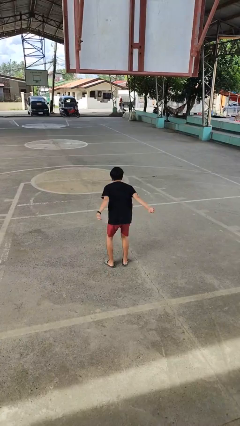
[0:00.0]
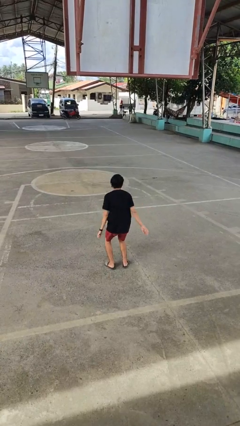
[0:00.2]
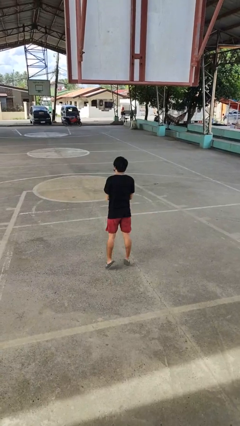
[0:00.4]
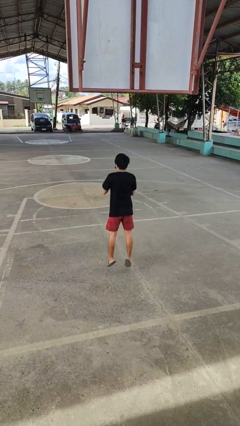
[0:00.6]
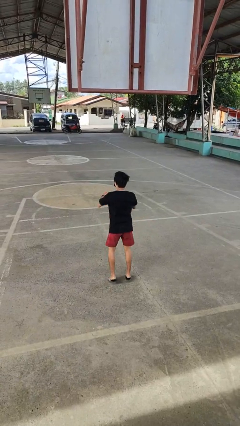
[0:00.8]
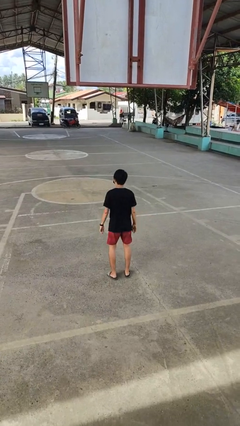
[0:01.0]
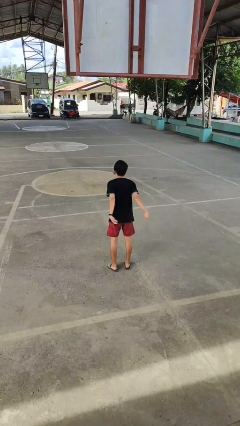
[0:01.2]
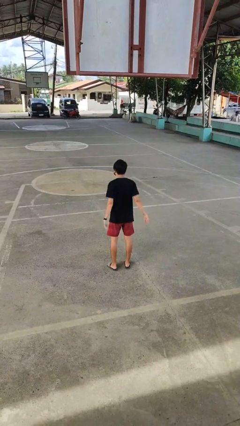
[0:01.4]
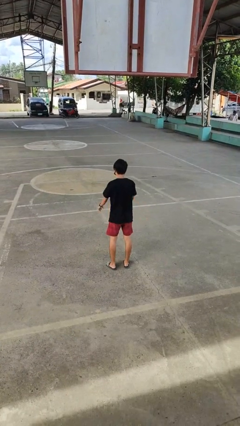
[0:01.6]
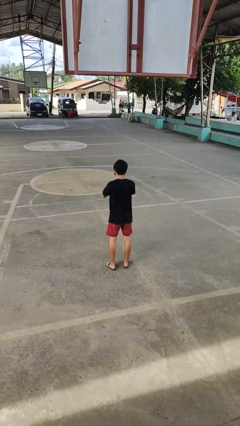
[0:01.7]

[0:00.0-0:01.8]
person jumps

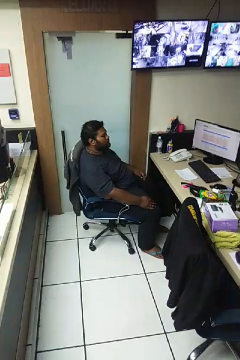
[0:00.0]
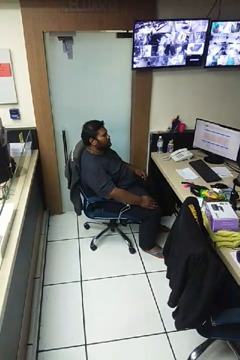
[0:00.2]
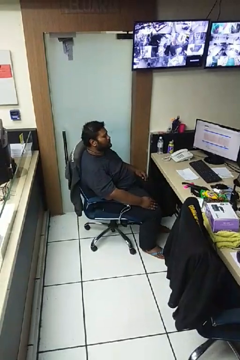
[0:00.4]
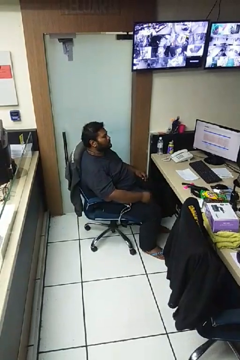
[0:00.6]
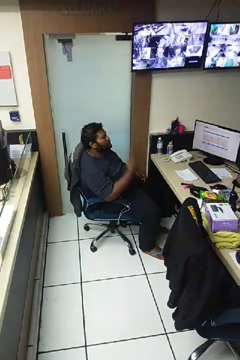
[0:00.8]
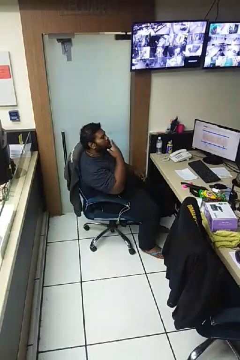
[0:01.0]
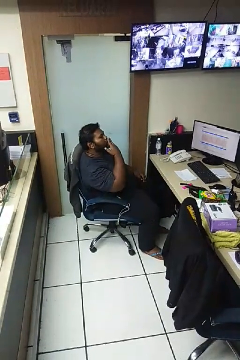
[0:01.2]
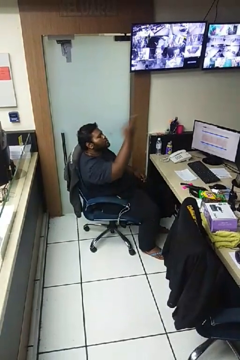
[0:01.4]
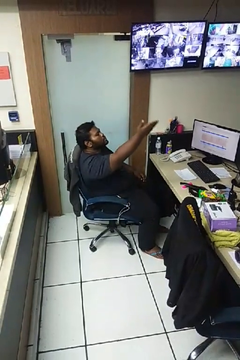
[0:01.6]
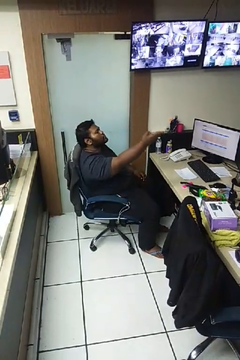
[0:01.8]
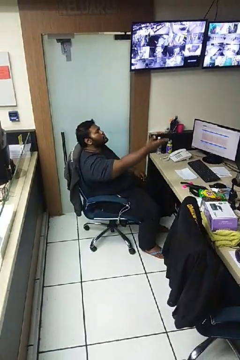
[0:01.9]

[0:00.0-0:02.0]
person gestures blow kiss

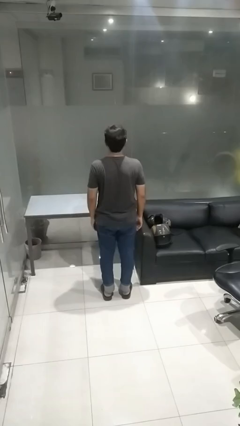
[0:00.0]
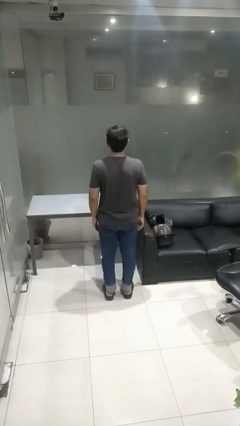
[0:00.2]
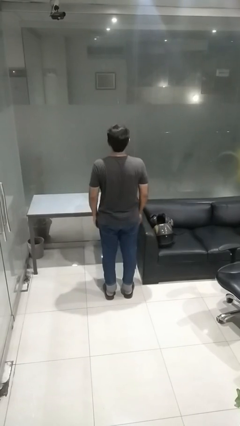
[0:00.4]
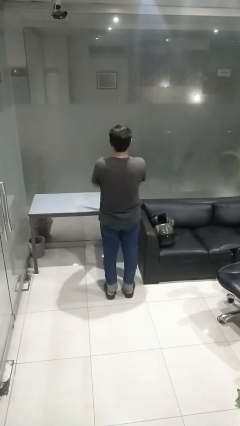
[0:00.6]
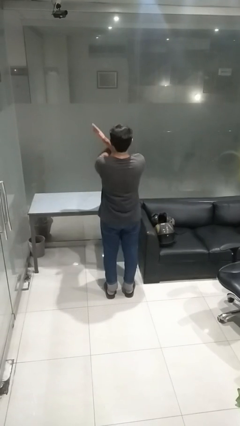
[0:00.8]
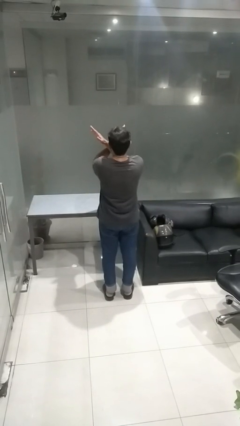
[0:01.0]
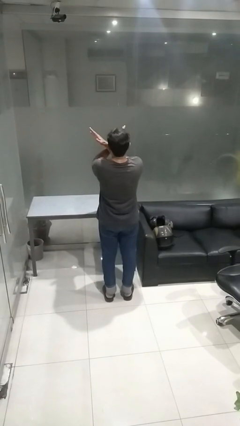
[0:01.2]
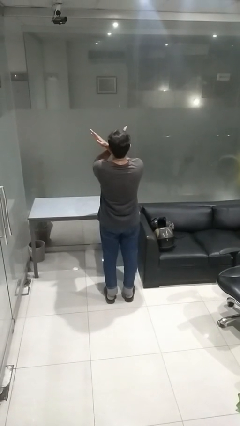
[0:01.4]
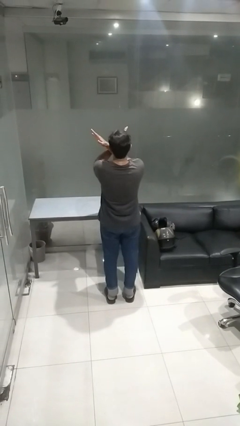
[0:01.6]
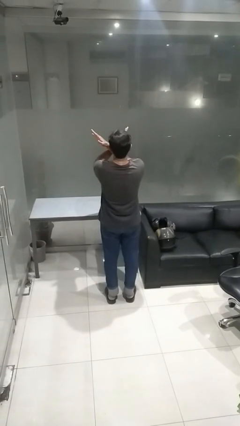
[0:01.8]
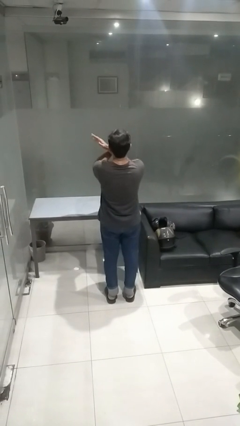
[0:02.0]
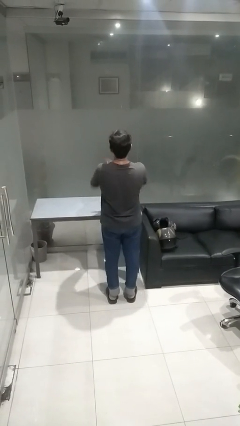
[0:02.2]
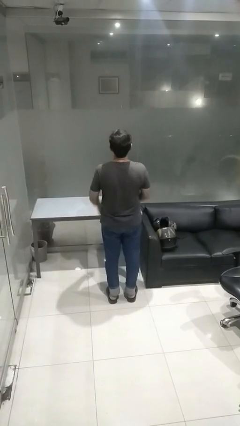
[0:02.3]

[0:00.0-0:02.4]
person gestures arms x

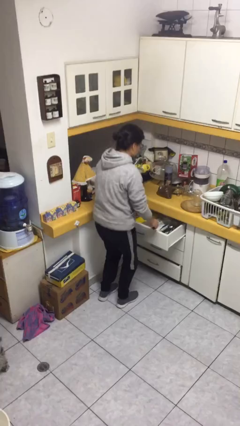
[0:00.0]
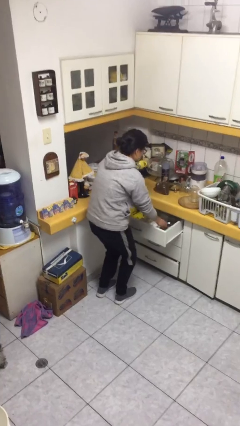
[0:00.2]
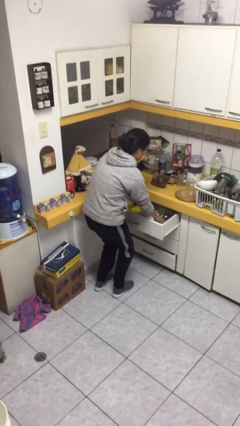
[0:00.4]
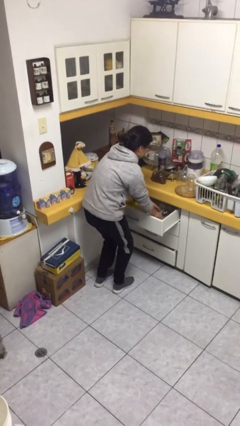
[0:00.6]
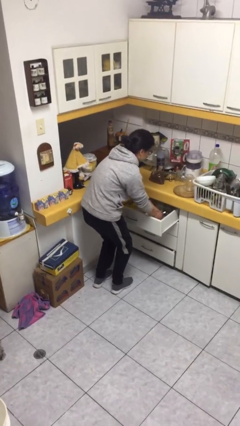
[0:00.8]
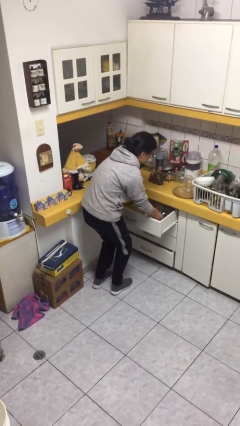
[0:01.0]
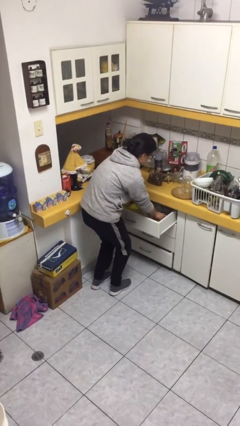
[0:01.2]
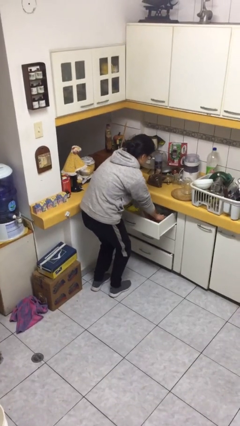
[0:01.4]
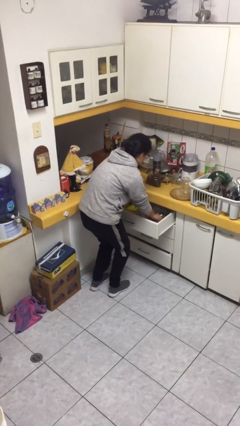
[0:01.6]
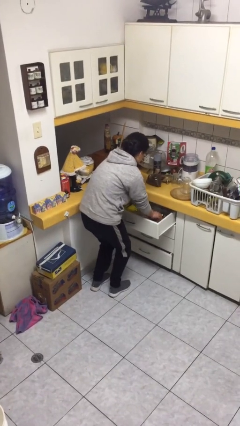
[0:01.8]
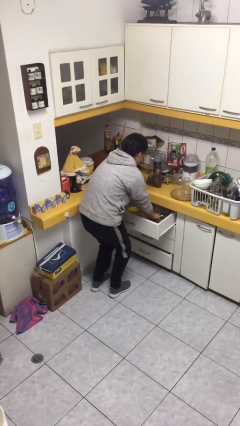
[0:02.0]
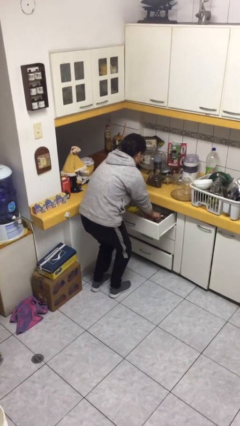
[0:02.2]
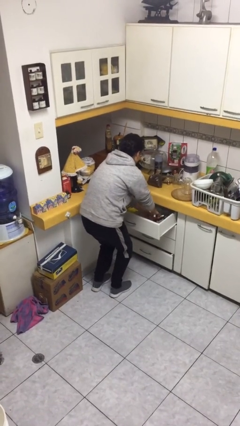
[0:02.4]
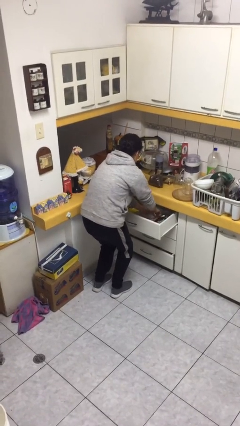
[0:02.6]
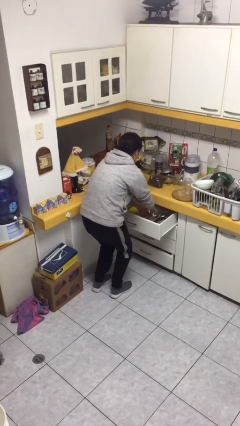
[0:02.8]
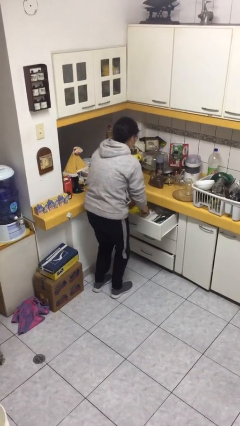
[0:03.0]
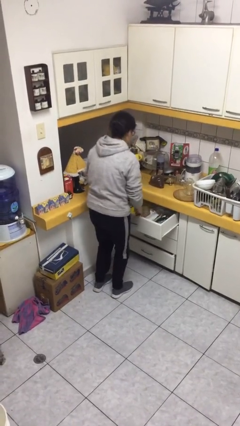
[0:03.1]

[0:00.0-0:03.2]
person searches in kitchen drawer

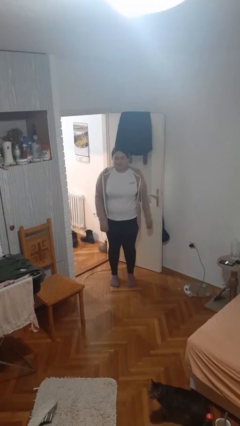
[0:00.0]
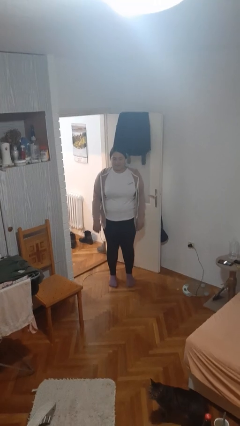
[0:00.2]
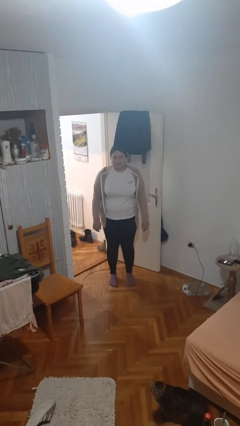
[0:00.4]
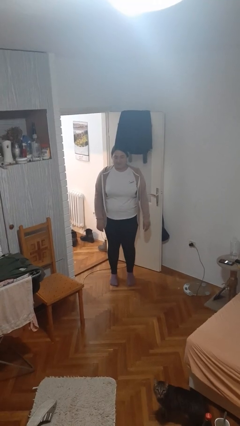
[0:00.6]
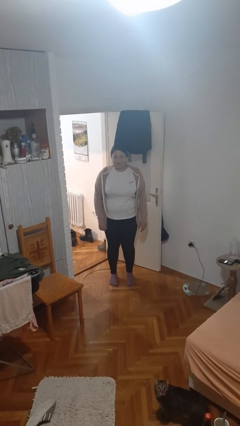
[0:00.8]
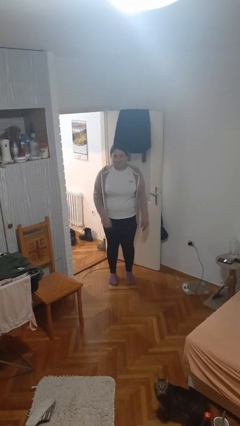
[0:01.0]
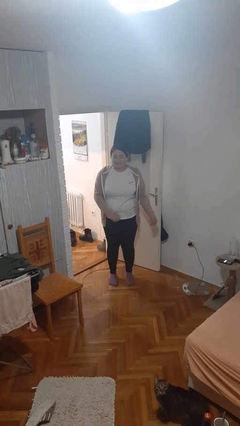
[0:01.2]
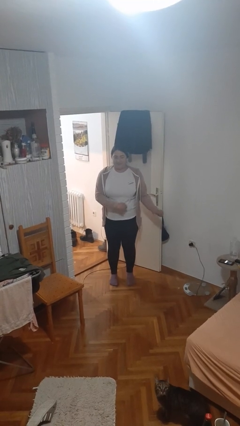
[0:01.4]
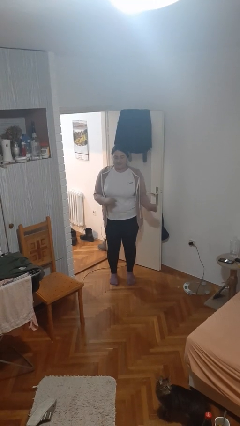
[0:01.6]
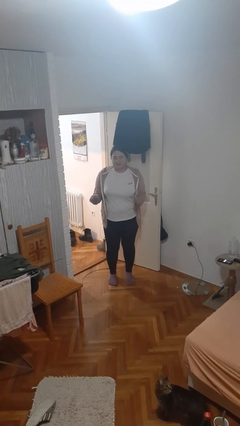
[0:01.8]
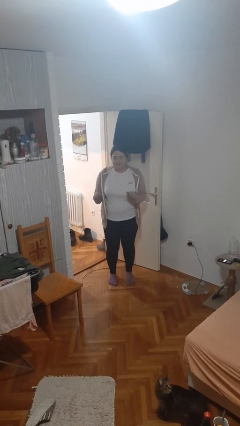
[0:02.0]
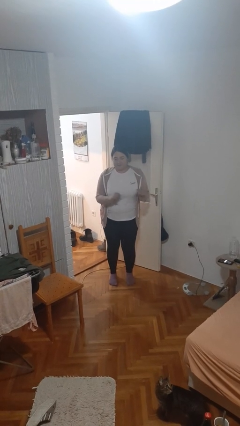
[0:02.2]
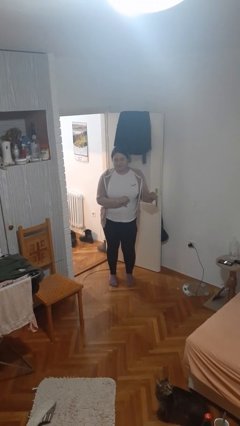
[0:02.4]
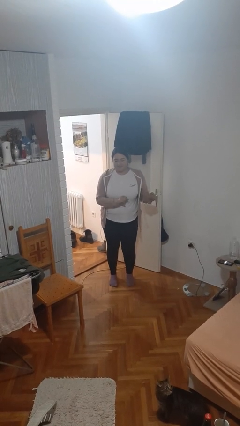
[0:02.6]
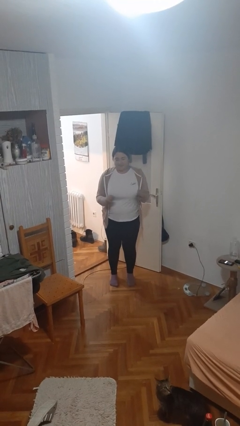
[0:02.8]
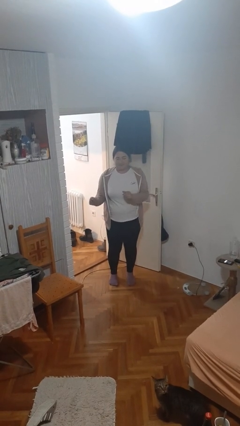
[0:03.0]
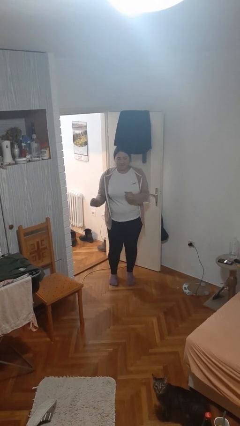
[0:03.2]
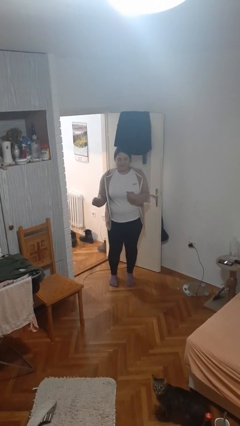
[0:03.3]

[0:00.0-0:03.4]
person dances in place

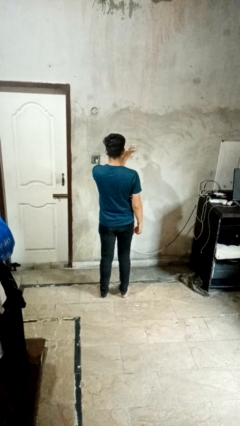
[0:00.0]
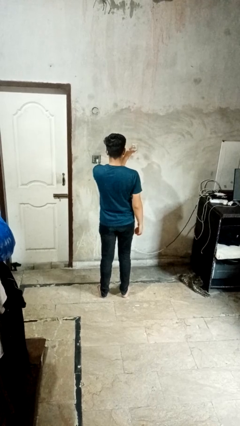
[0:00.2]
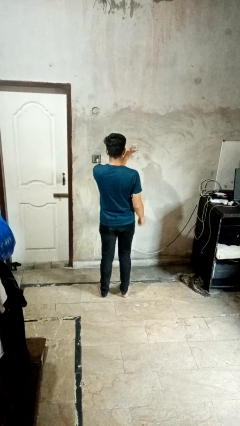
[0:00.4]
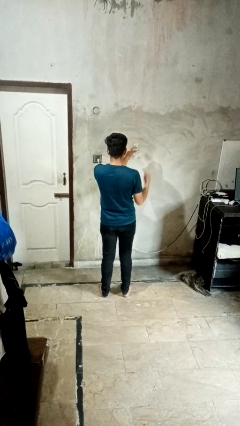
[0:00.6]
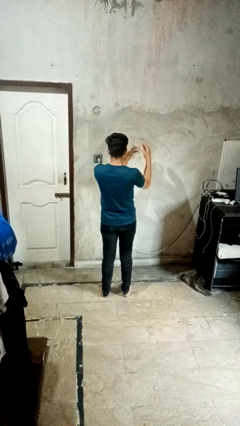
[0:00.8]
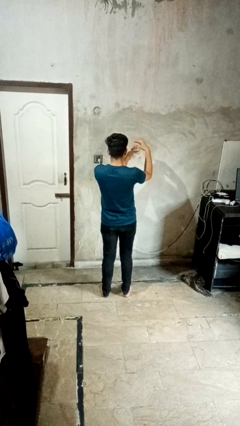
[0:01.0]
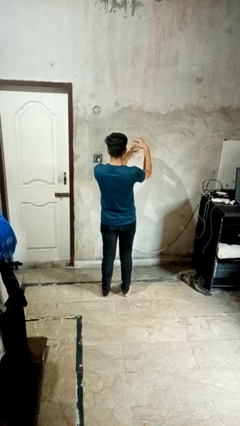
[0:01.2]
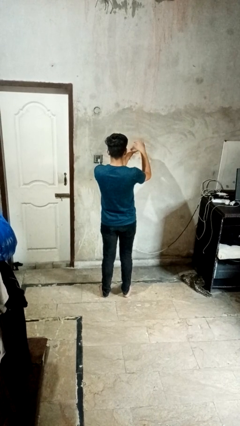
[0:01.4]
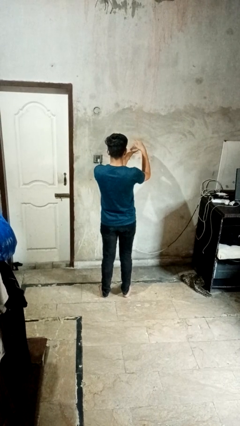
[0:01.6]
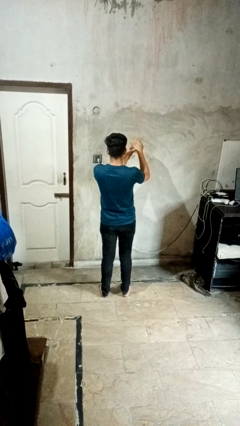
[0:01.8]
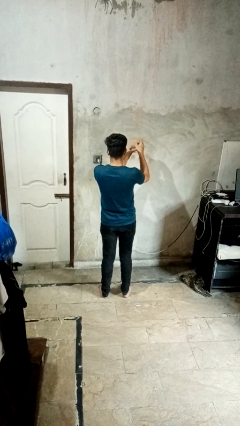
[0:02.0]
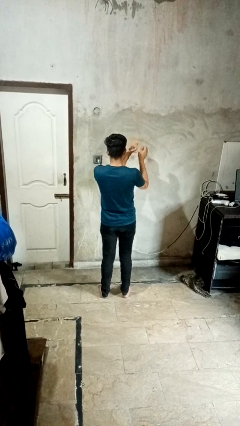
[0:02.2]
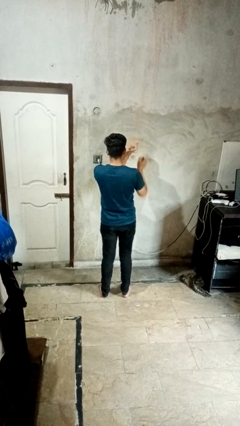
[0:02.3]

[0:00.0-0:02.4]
person closes jar

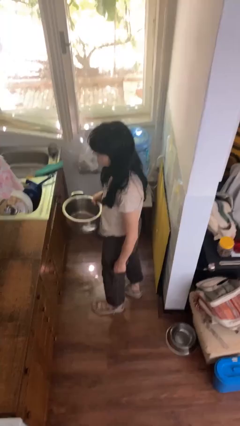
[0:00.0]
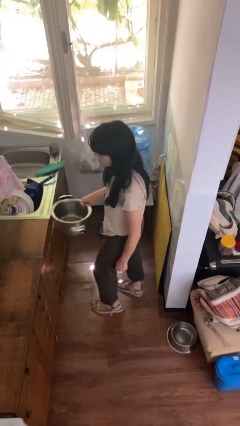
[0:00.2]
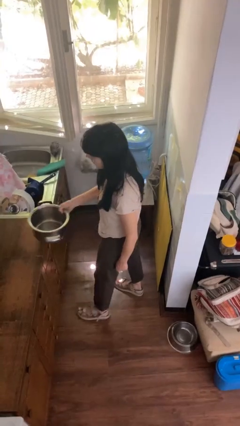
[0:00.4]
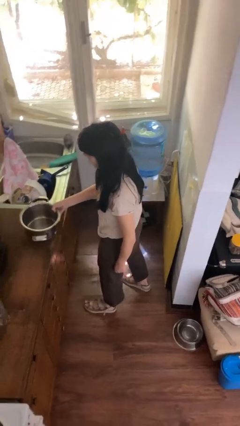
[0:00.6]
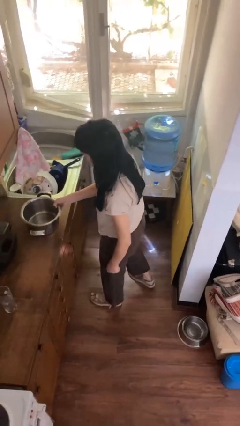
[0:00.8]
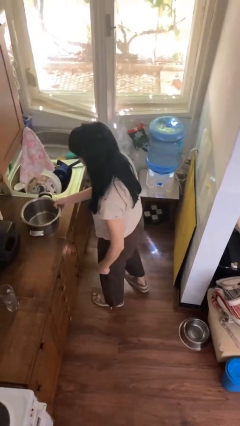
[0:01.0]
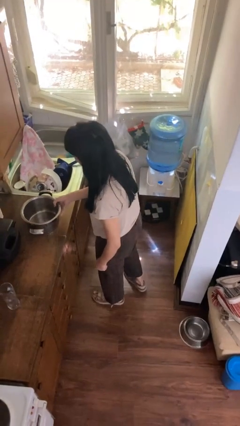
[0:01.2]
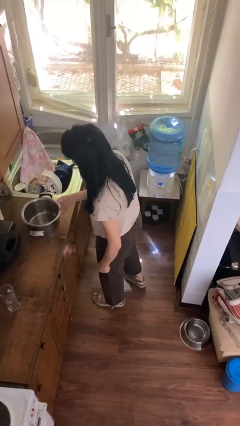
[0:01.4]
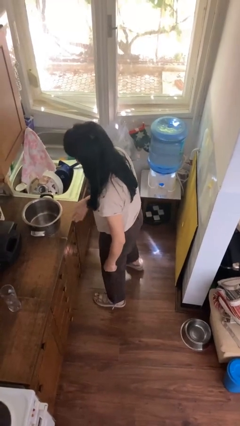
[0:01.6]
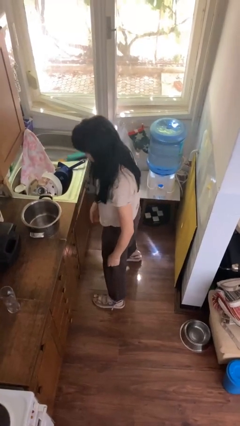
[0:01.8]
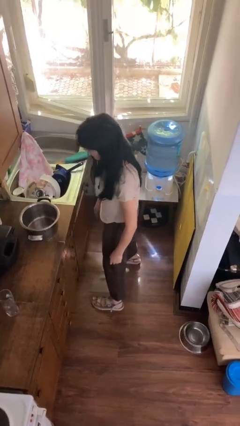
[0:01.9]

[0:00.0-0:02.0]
person puts down object on countertop
